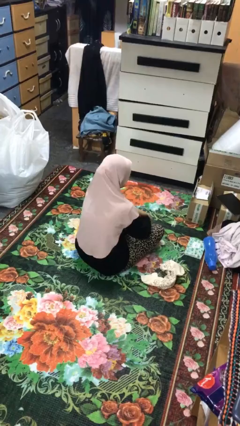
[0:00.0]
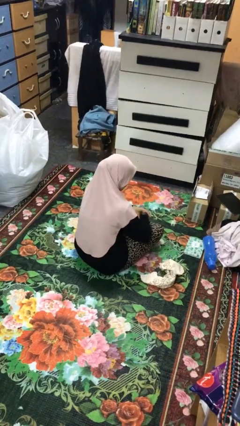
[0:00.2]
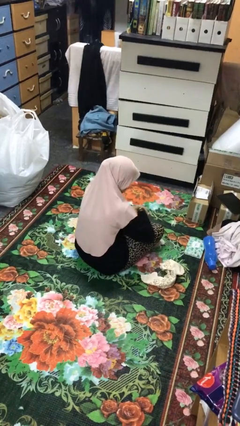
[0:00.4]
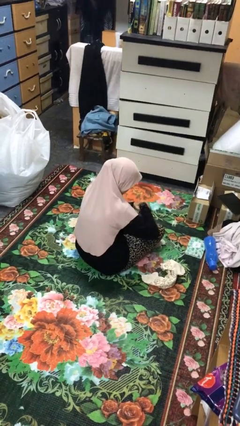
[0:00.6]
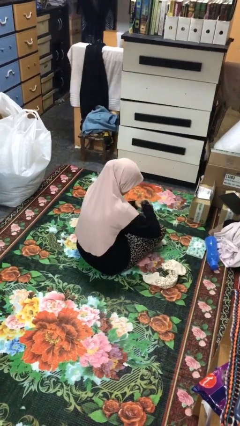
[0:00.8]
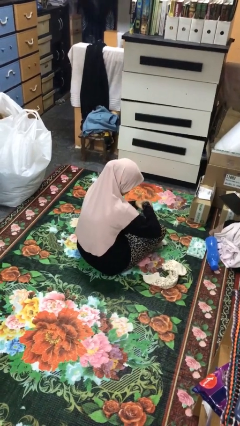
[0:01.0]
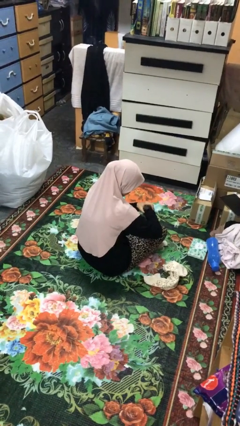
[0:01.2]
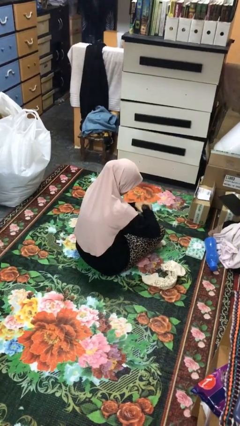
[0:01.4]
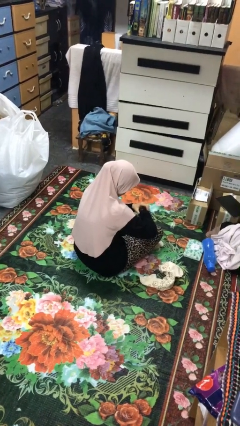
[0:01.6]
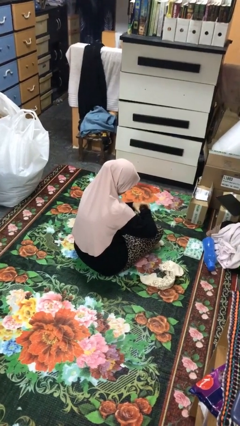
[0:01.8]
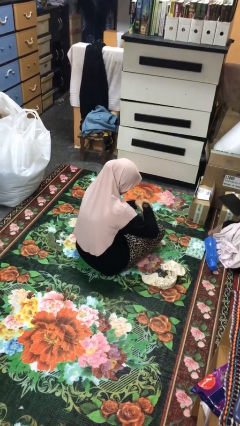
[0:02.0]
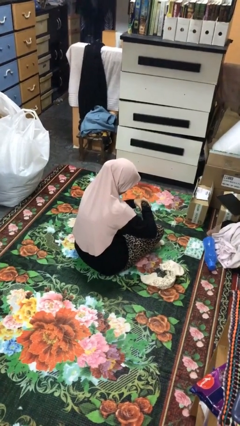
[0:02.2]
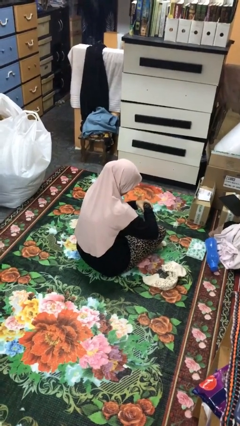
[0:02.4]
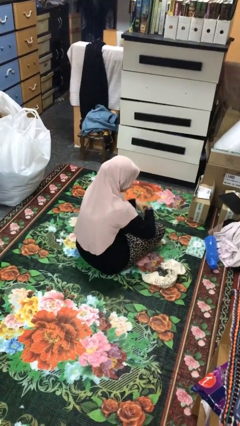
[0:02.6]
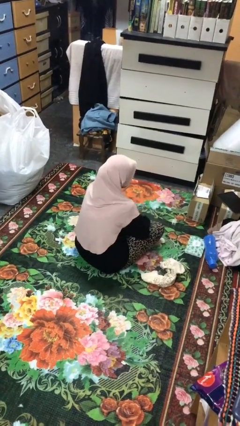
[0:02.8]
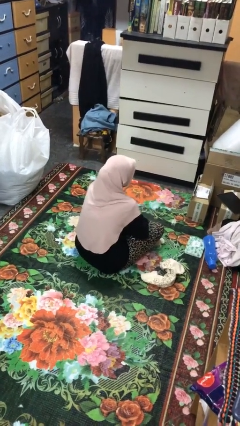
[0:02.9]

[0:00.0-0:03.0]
person looks at wristwatch

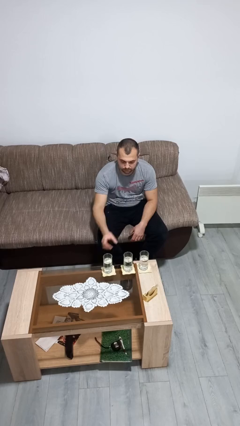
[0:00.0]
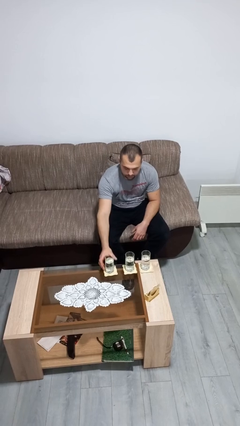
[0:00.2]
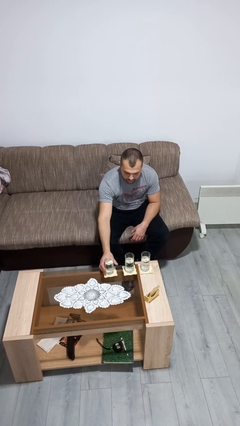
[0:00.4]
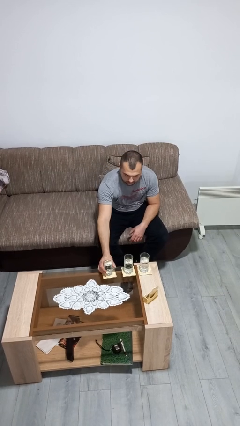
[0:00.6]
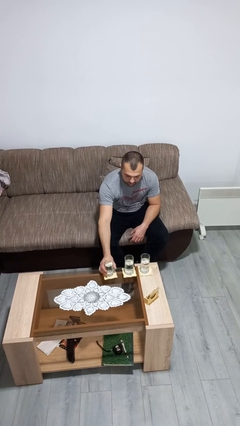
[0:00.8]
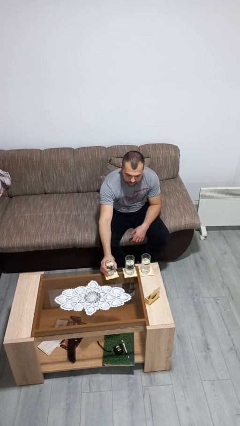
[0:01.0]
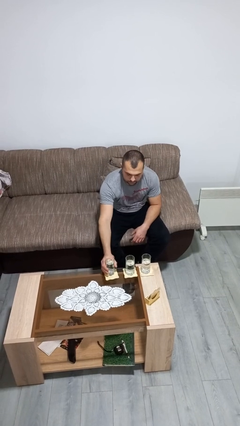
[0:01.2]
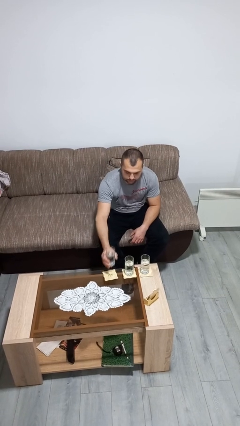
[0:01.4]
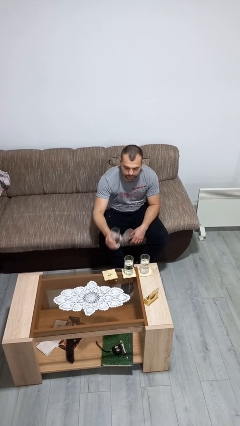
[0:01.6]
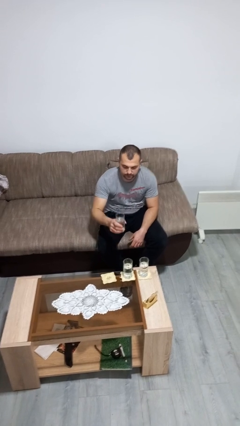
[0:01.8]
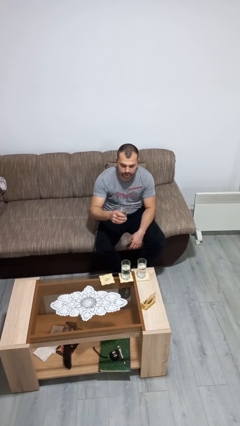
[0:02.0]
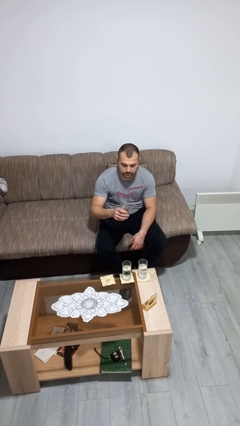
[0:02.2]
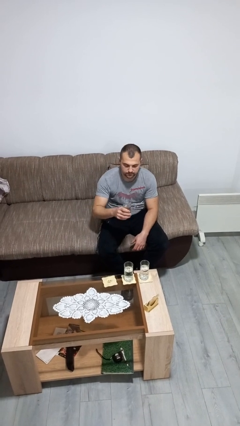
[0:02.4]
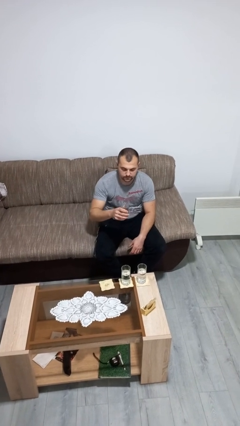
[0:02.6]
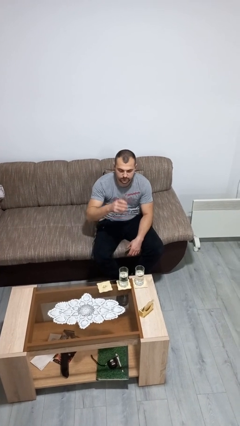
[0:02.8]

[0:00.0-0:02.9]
person picks up object from table

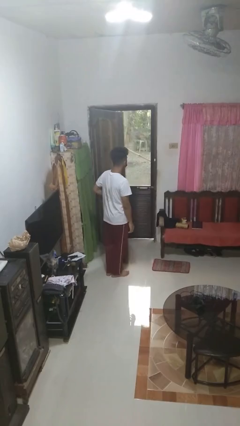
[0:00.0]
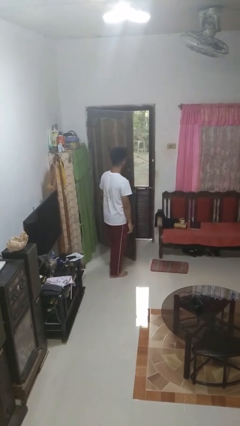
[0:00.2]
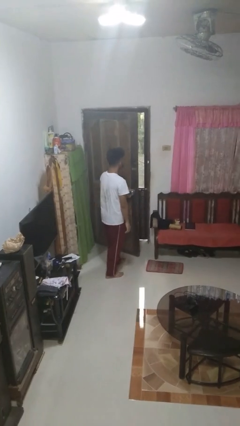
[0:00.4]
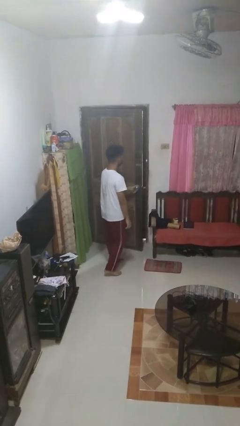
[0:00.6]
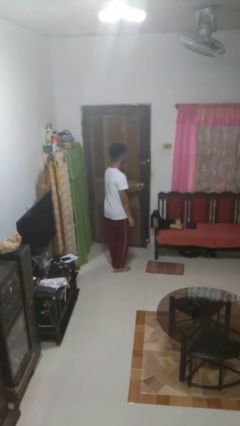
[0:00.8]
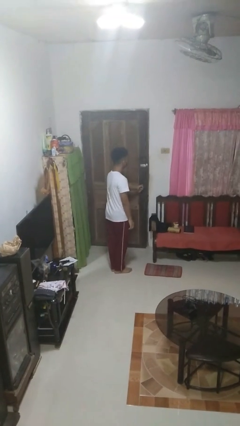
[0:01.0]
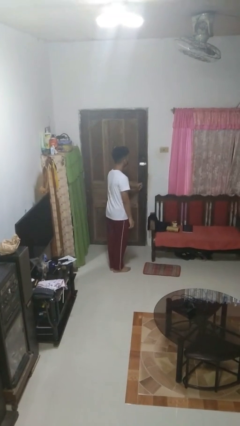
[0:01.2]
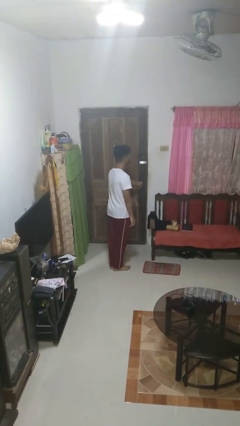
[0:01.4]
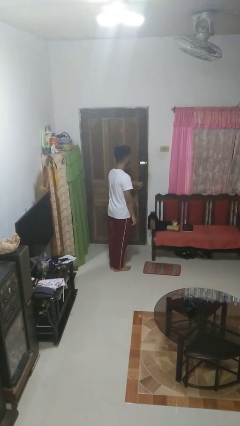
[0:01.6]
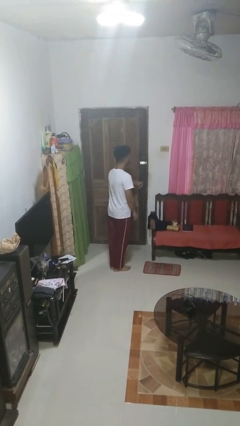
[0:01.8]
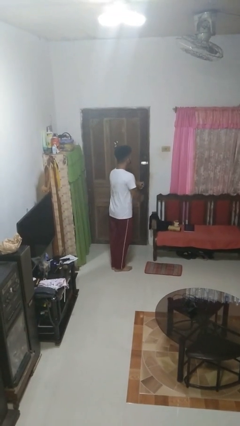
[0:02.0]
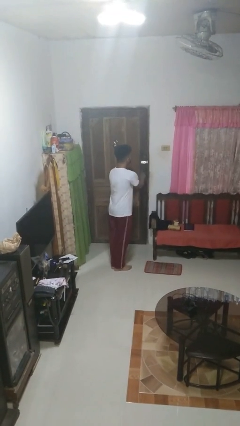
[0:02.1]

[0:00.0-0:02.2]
person closes facility door

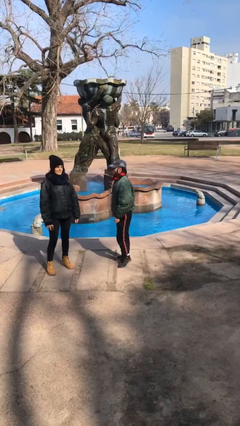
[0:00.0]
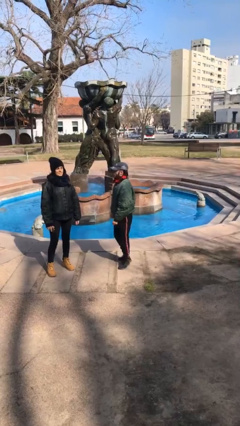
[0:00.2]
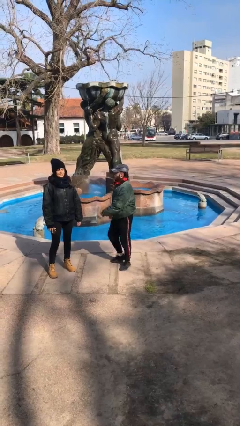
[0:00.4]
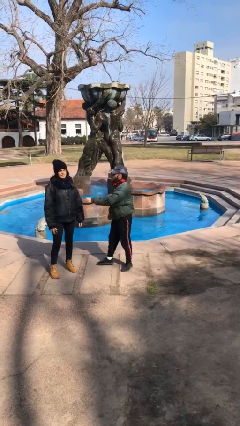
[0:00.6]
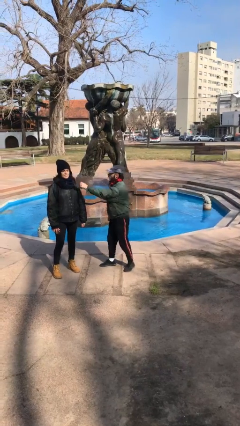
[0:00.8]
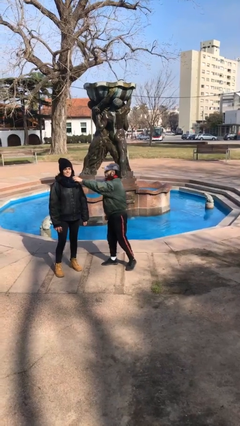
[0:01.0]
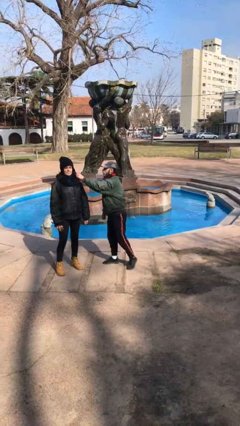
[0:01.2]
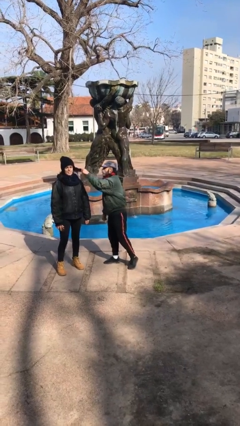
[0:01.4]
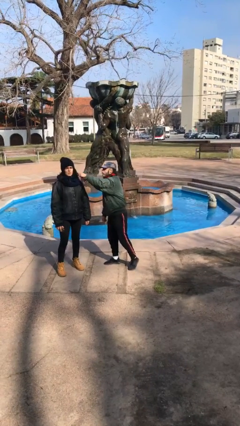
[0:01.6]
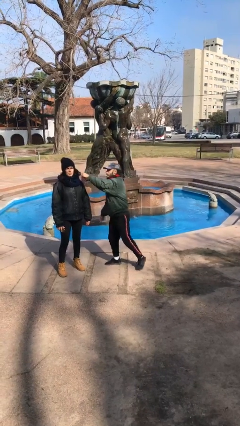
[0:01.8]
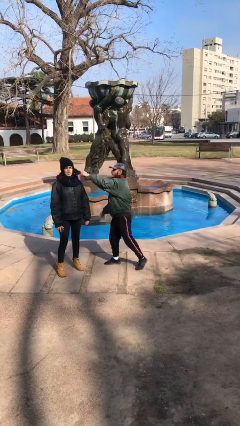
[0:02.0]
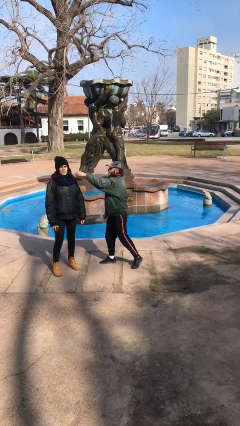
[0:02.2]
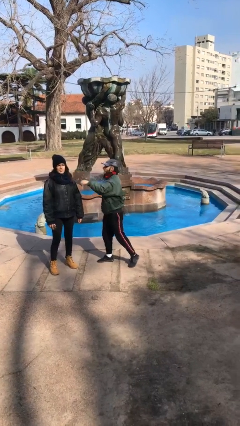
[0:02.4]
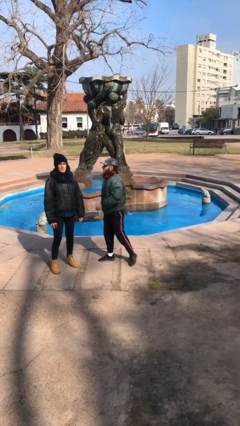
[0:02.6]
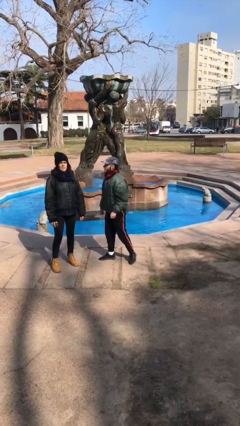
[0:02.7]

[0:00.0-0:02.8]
person grabs person by hair

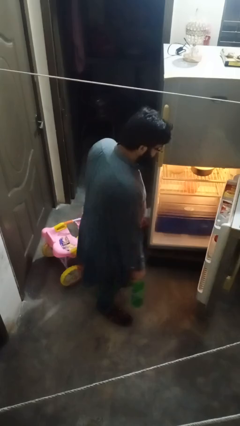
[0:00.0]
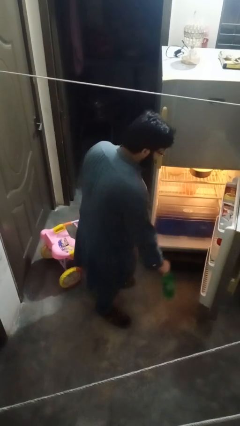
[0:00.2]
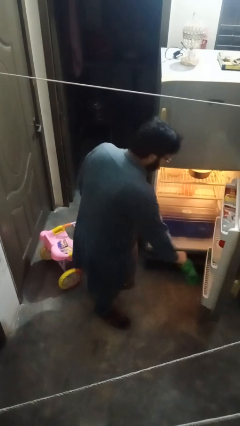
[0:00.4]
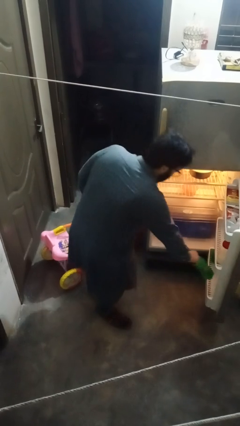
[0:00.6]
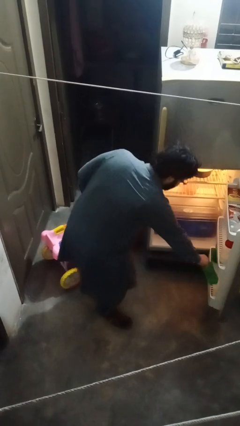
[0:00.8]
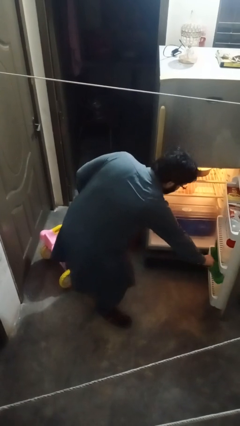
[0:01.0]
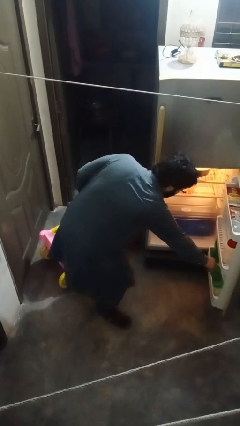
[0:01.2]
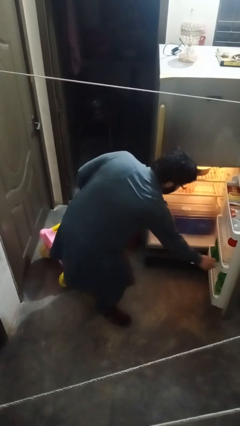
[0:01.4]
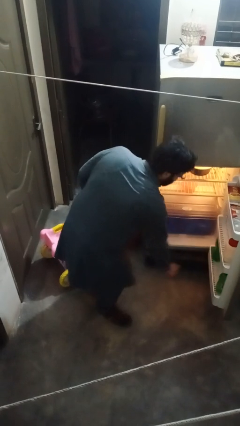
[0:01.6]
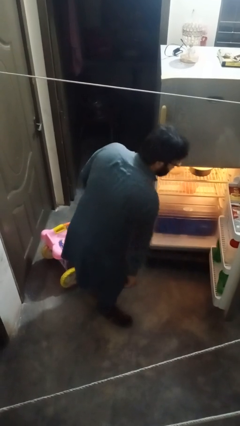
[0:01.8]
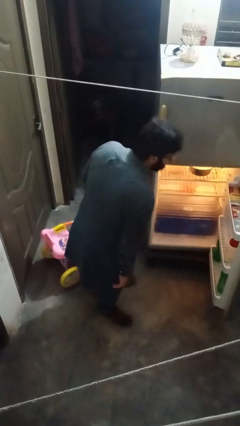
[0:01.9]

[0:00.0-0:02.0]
person puts object into refrigerator

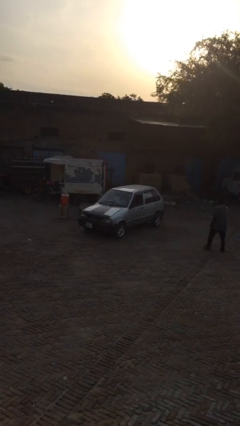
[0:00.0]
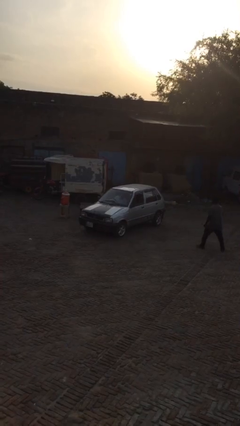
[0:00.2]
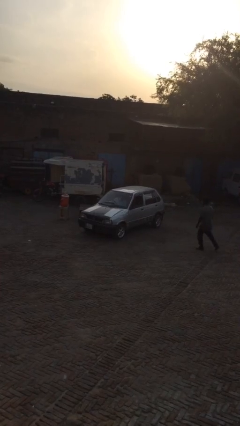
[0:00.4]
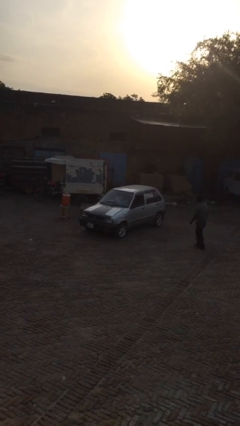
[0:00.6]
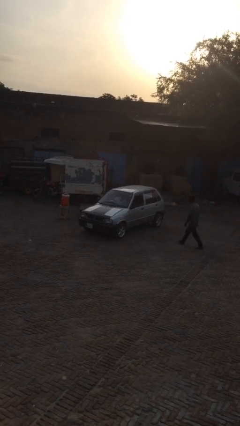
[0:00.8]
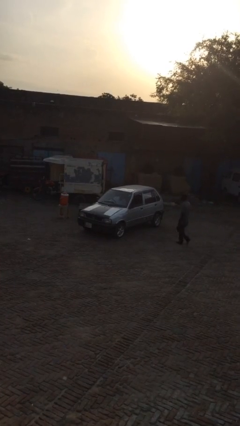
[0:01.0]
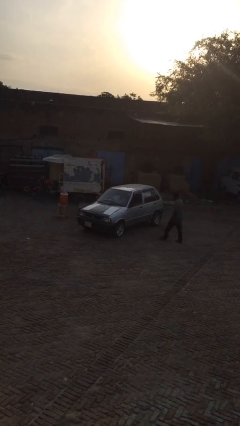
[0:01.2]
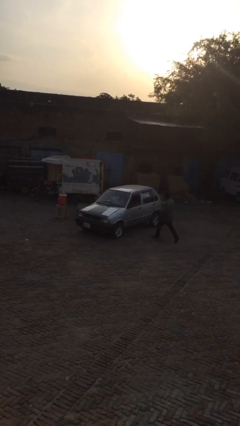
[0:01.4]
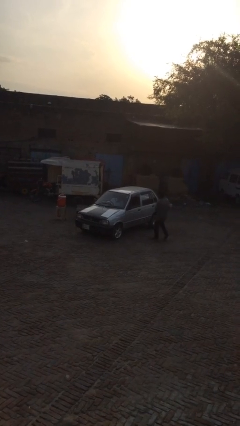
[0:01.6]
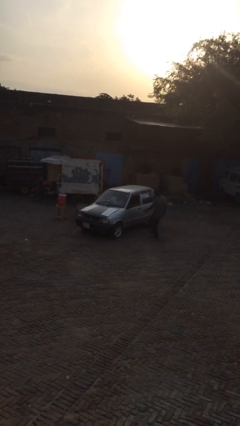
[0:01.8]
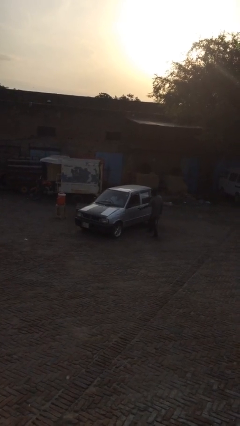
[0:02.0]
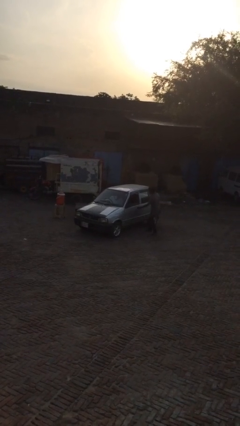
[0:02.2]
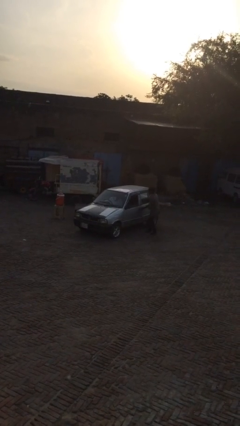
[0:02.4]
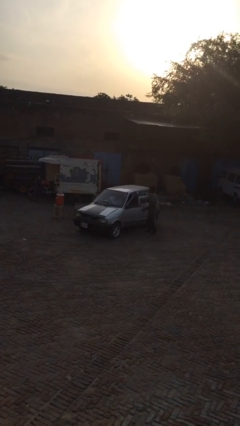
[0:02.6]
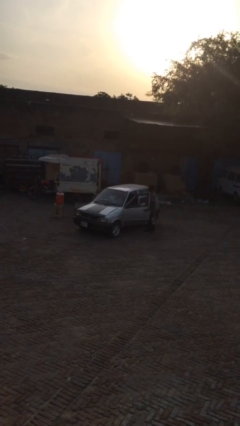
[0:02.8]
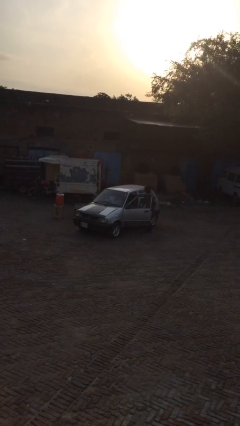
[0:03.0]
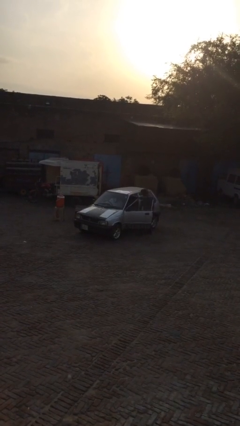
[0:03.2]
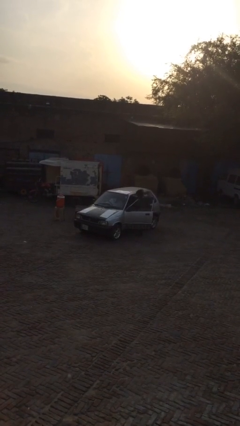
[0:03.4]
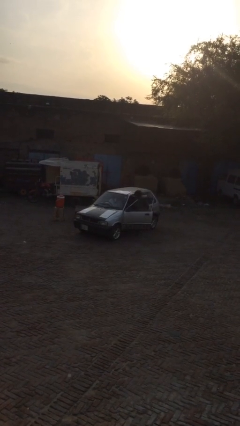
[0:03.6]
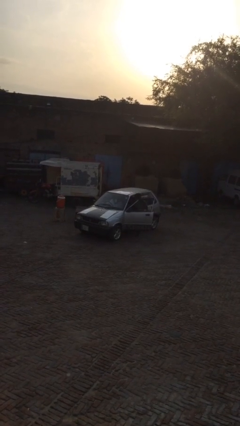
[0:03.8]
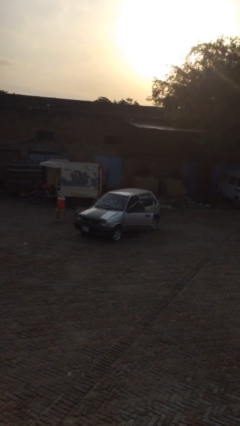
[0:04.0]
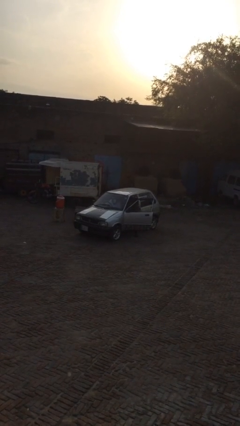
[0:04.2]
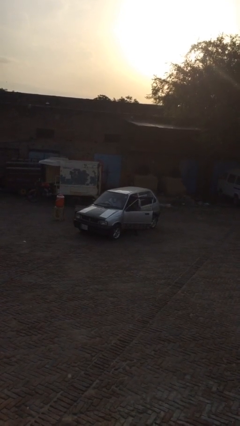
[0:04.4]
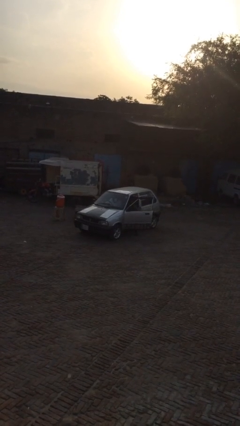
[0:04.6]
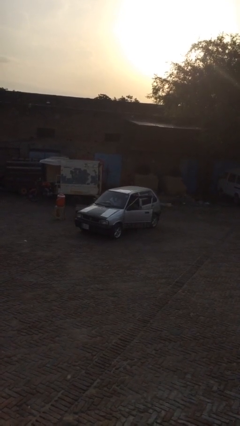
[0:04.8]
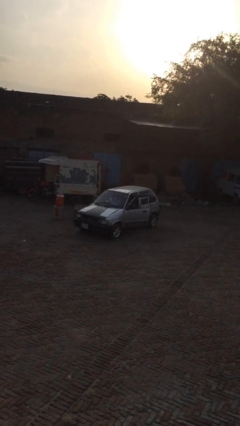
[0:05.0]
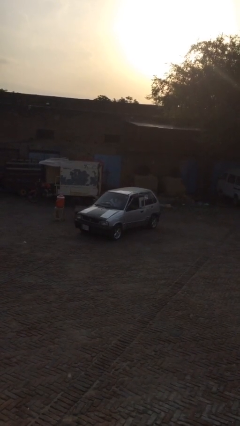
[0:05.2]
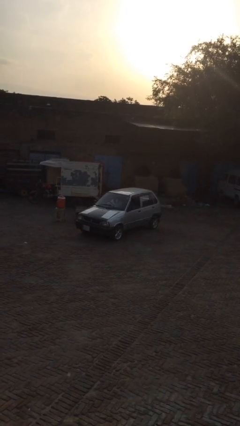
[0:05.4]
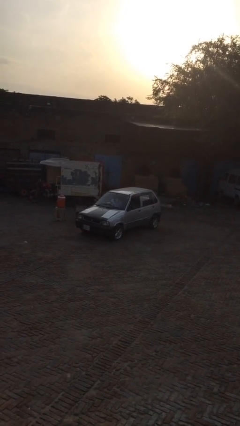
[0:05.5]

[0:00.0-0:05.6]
car picks up person
